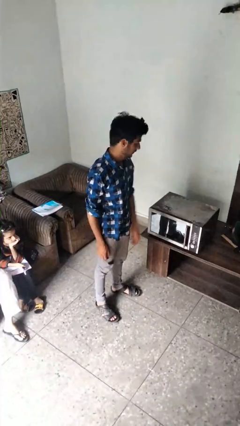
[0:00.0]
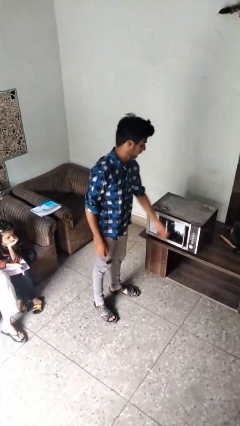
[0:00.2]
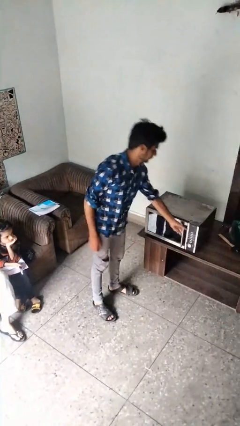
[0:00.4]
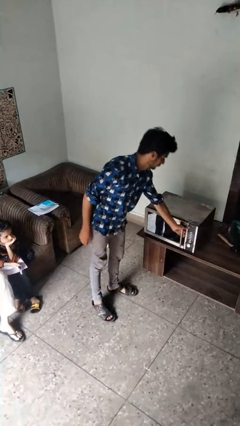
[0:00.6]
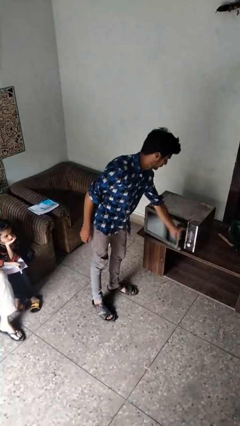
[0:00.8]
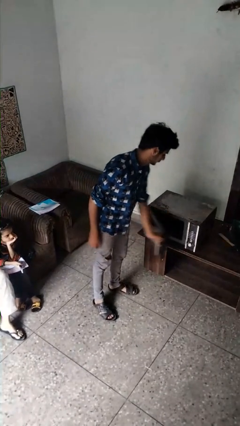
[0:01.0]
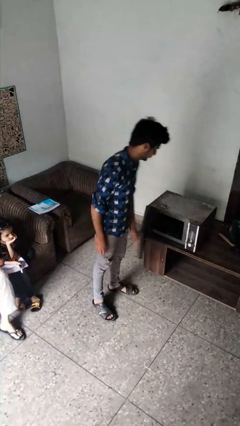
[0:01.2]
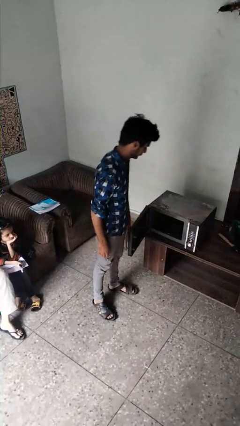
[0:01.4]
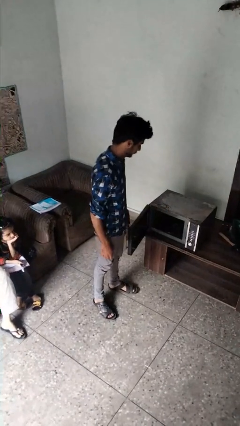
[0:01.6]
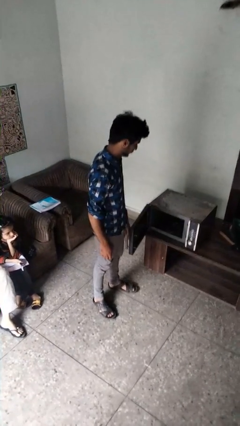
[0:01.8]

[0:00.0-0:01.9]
person opens microwave

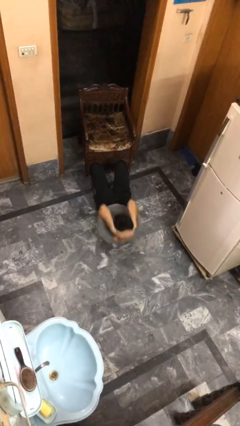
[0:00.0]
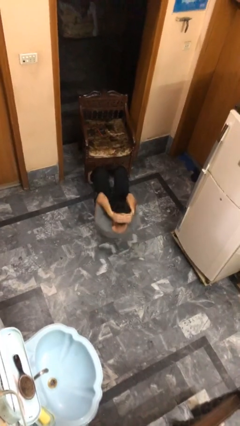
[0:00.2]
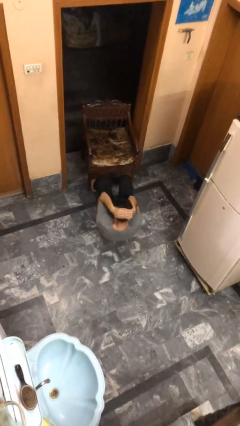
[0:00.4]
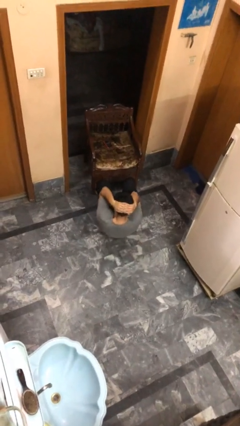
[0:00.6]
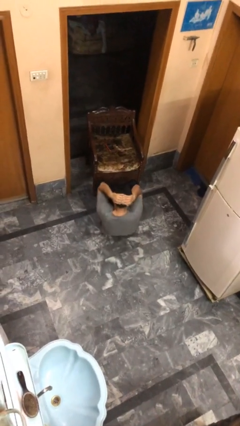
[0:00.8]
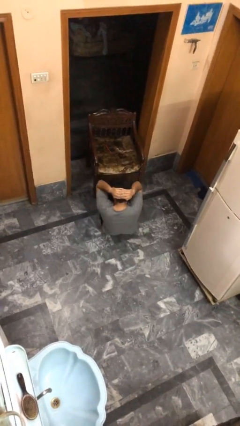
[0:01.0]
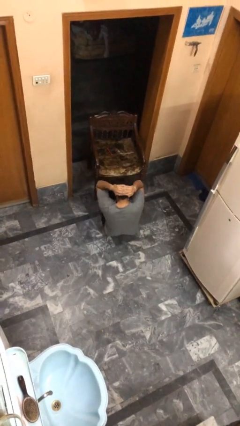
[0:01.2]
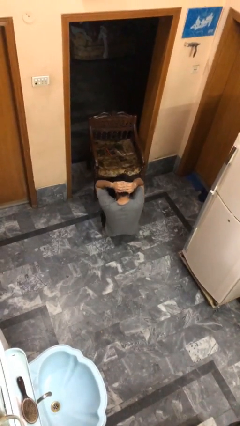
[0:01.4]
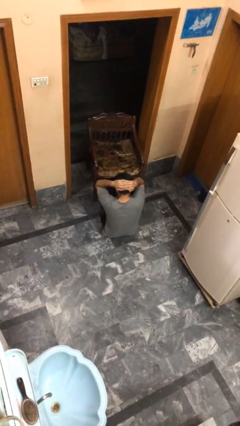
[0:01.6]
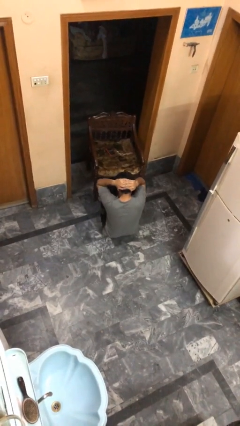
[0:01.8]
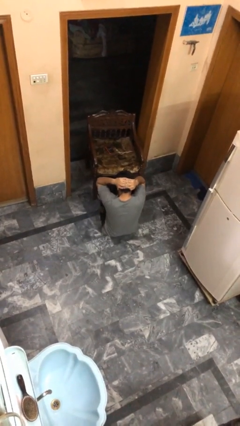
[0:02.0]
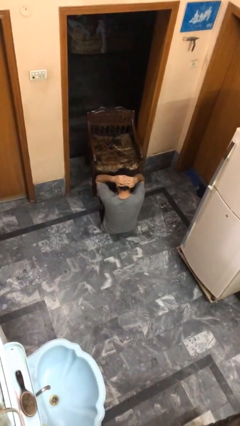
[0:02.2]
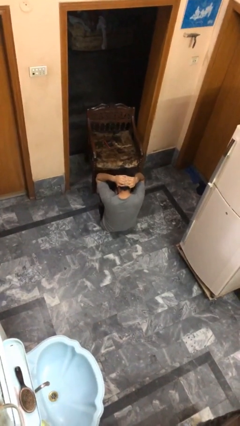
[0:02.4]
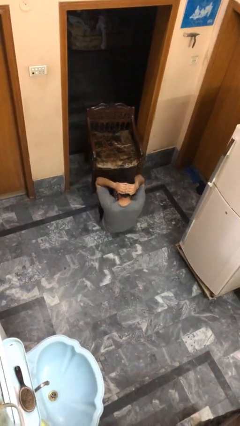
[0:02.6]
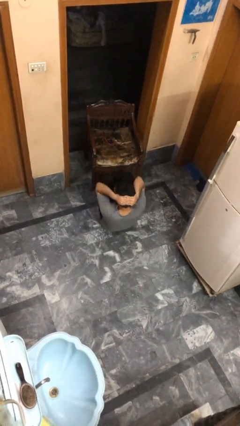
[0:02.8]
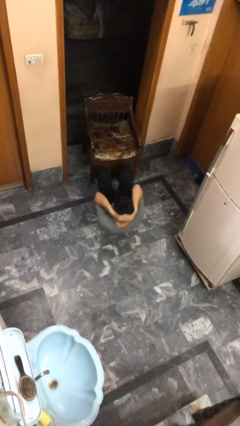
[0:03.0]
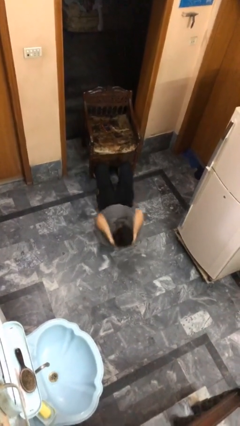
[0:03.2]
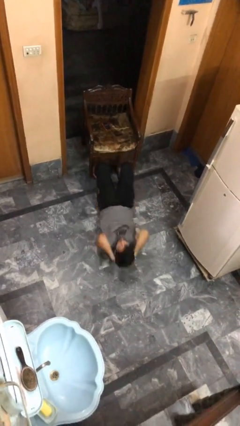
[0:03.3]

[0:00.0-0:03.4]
person exercises with situp

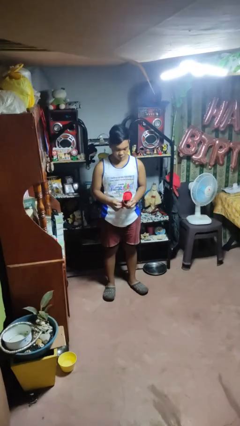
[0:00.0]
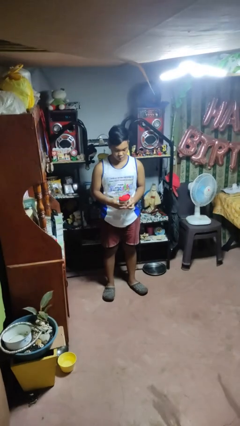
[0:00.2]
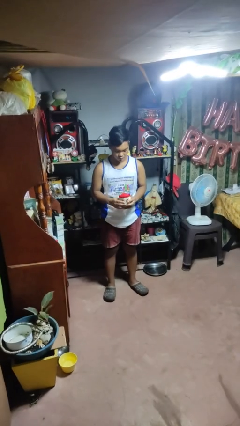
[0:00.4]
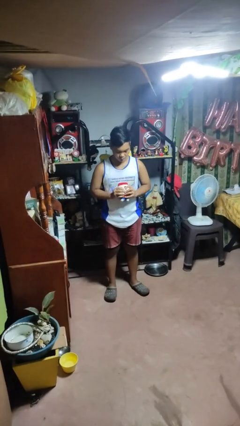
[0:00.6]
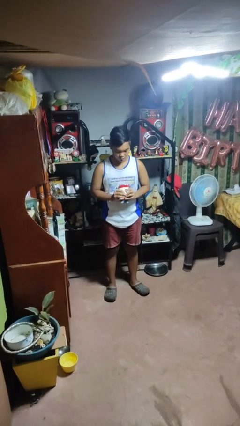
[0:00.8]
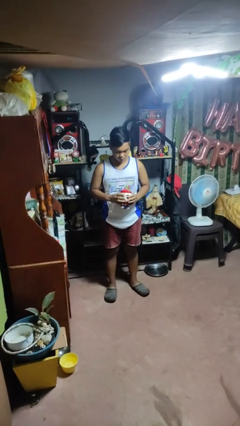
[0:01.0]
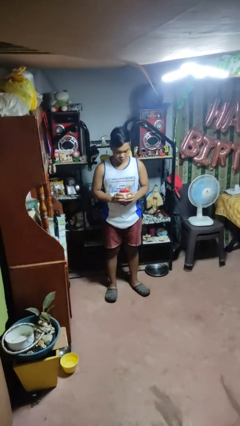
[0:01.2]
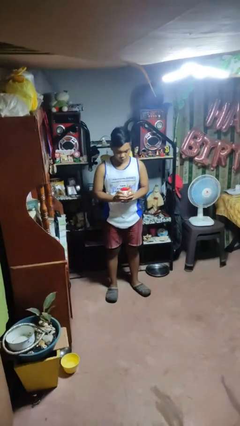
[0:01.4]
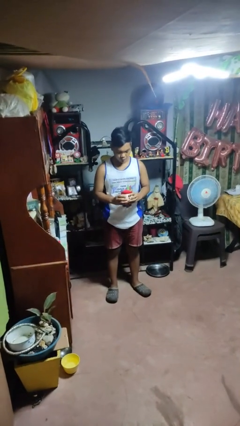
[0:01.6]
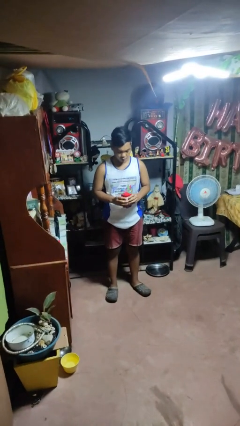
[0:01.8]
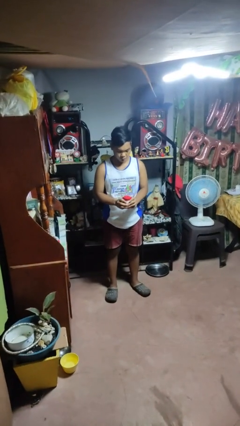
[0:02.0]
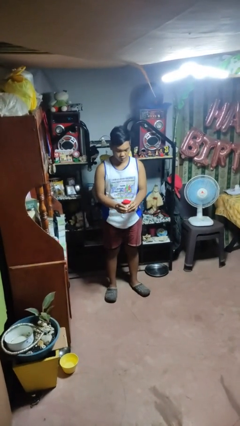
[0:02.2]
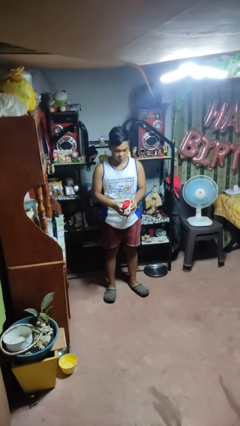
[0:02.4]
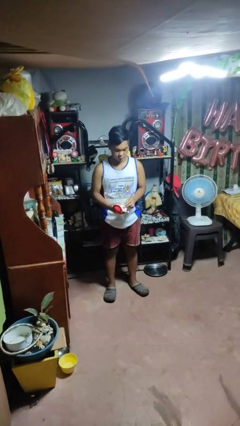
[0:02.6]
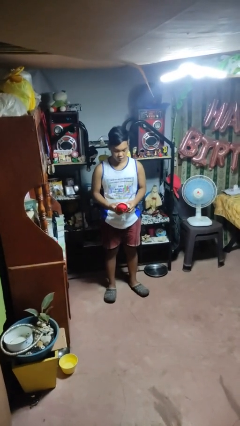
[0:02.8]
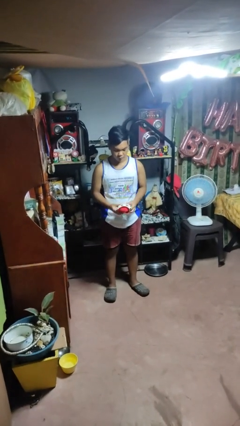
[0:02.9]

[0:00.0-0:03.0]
person squeezes object

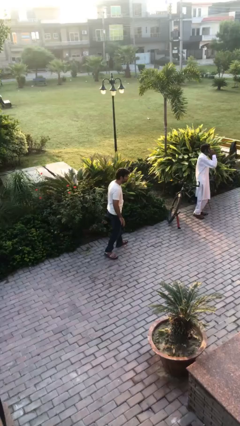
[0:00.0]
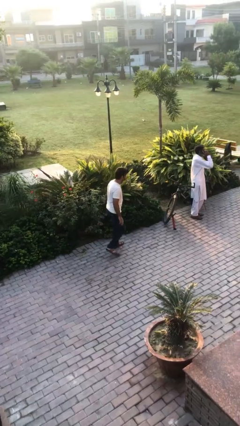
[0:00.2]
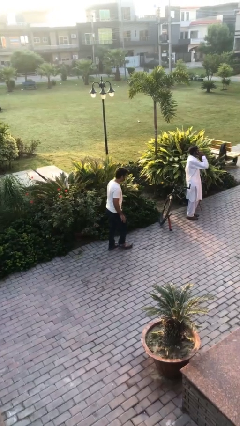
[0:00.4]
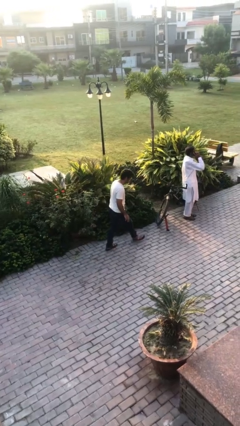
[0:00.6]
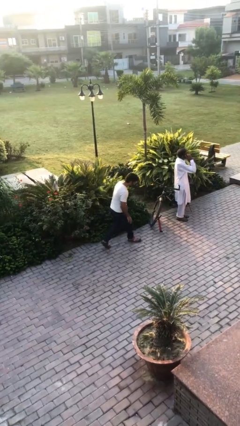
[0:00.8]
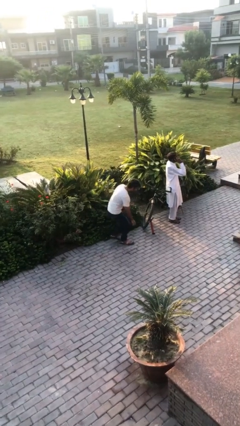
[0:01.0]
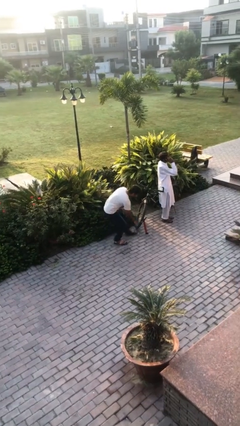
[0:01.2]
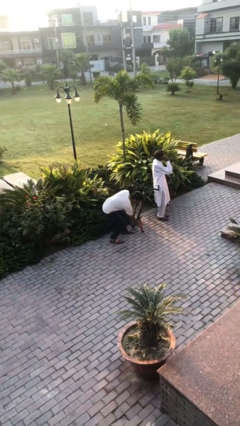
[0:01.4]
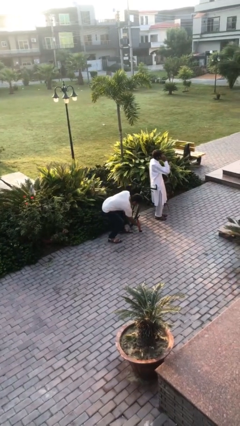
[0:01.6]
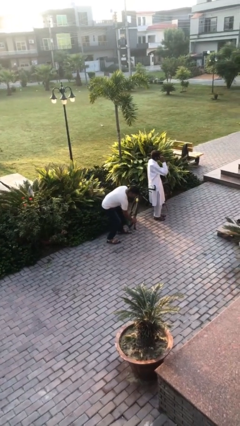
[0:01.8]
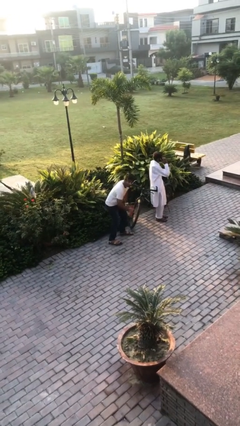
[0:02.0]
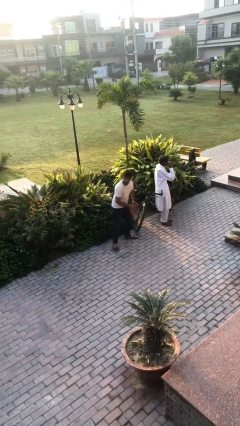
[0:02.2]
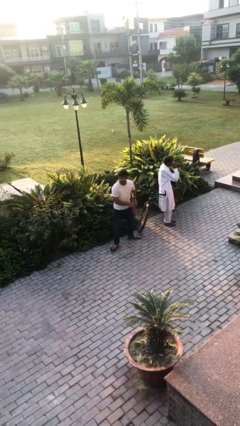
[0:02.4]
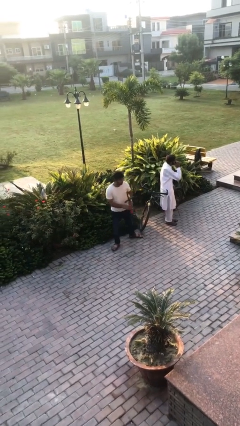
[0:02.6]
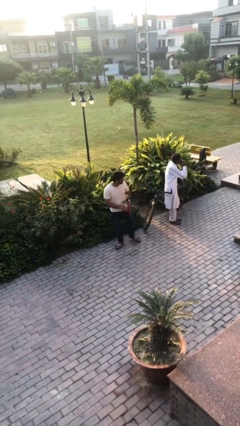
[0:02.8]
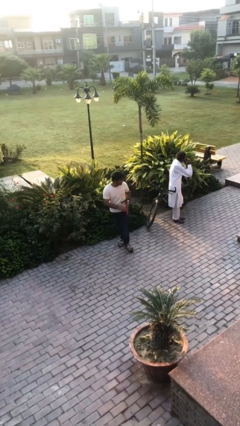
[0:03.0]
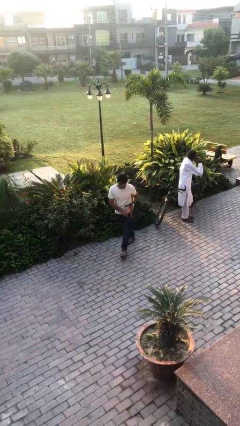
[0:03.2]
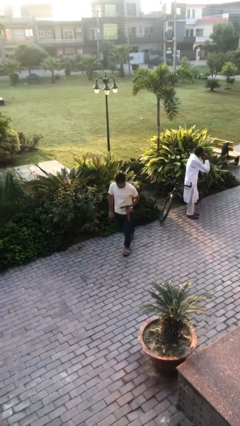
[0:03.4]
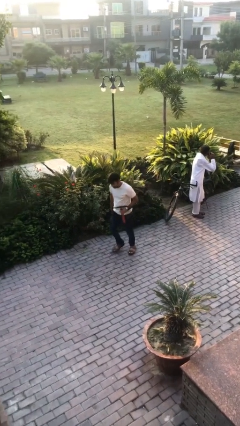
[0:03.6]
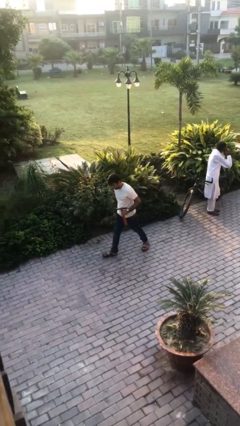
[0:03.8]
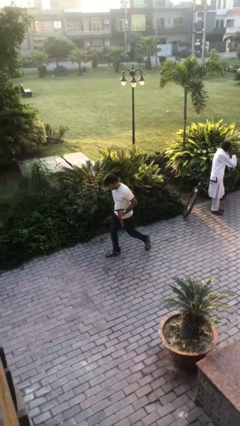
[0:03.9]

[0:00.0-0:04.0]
person steals object from person

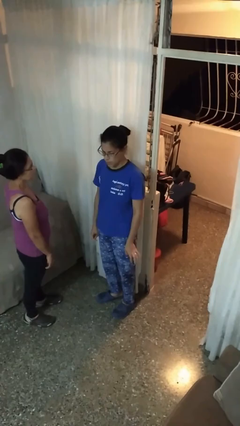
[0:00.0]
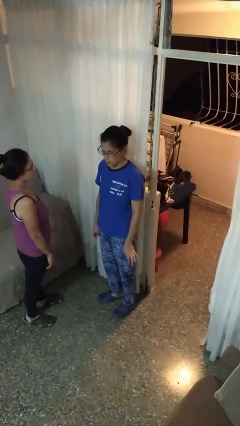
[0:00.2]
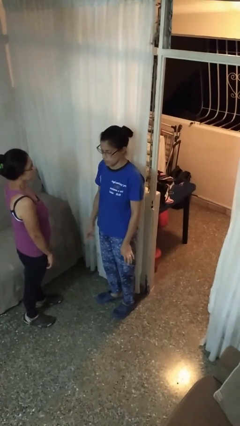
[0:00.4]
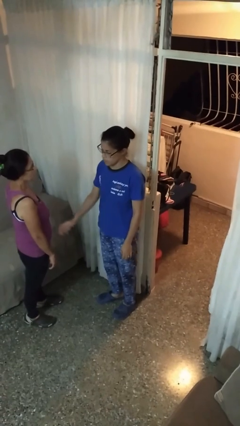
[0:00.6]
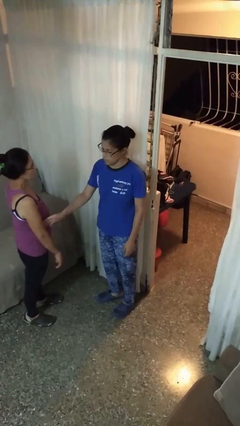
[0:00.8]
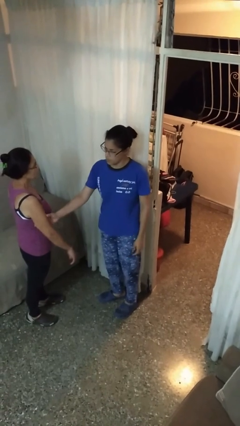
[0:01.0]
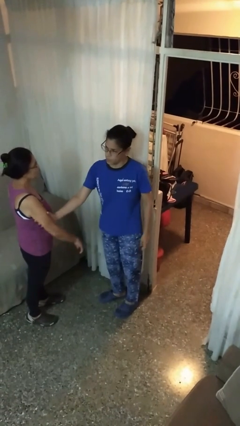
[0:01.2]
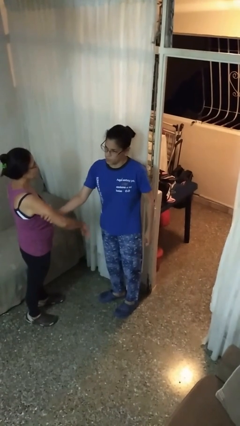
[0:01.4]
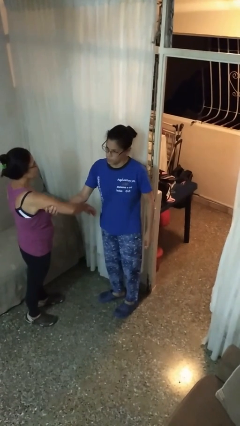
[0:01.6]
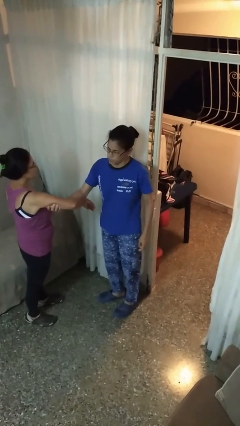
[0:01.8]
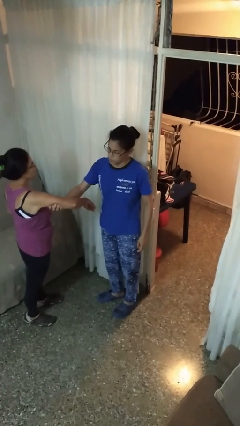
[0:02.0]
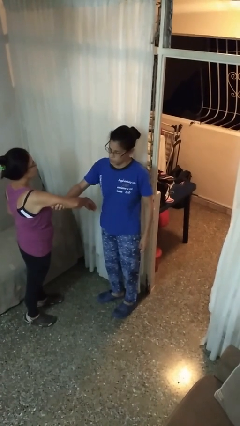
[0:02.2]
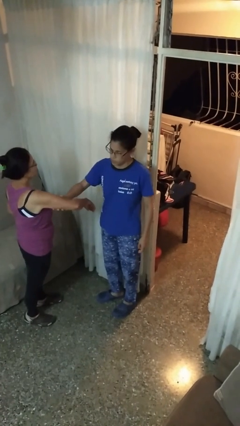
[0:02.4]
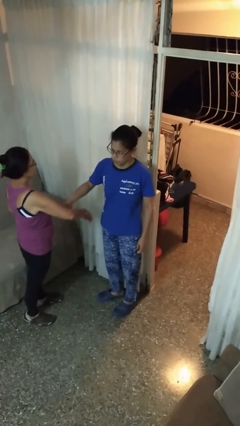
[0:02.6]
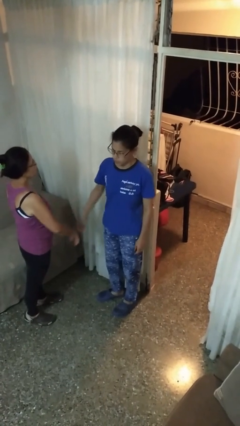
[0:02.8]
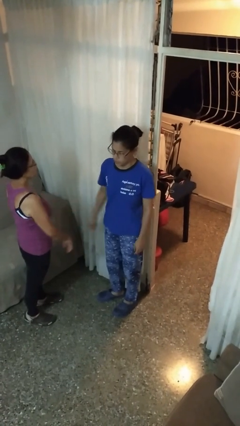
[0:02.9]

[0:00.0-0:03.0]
person grabs person by bicep

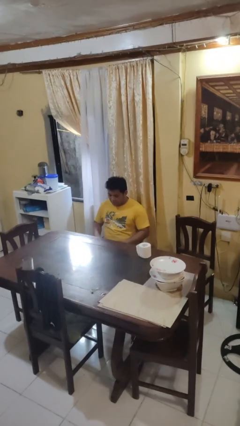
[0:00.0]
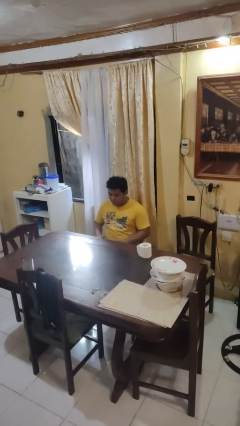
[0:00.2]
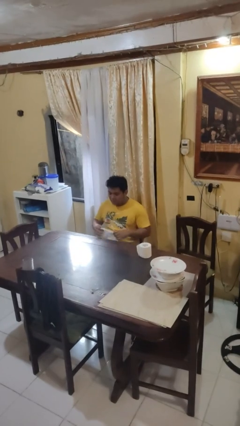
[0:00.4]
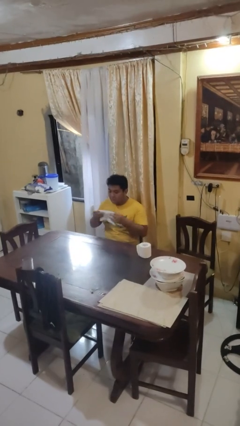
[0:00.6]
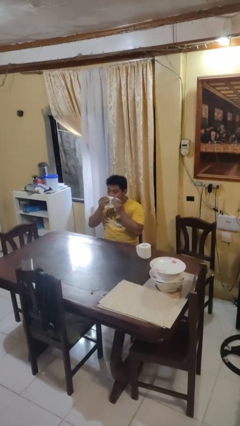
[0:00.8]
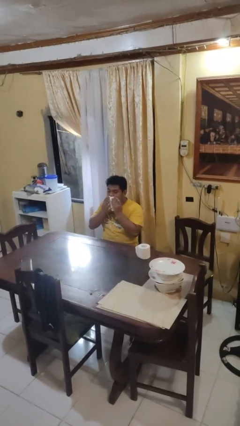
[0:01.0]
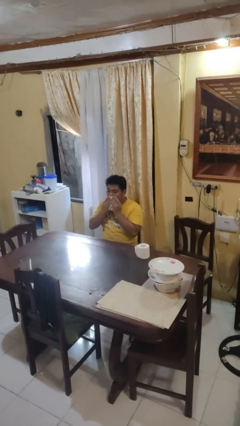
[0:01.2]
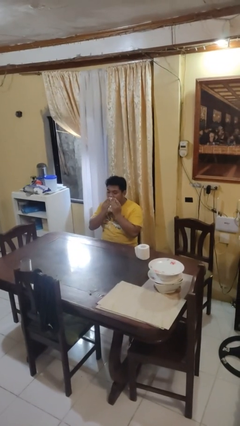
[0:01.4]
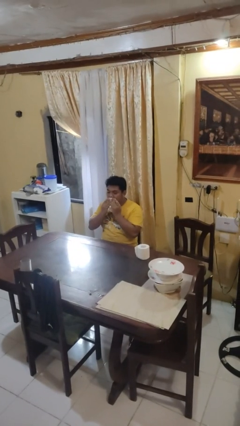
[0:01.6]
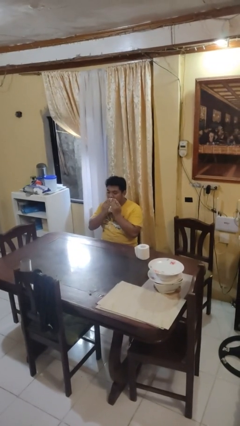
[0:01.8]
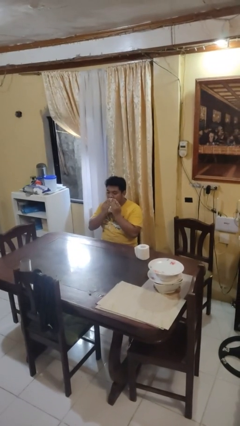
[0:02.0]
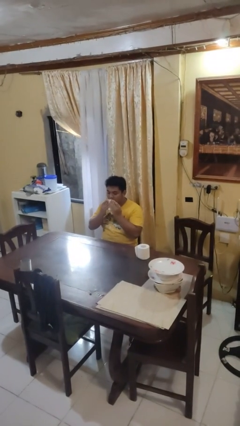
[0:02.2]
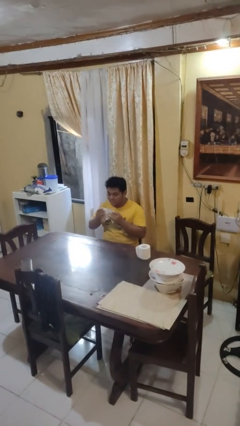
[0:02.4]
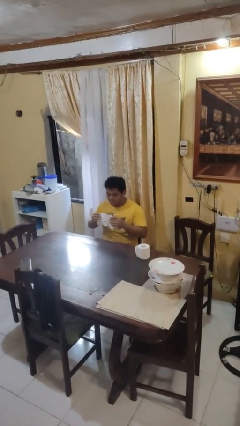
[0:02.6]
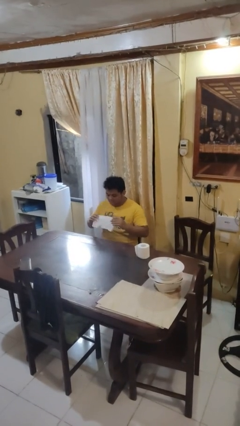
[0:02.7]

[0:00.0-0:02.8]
person wipes mouth with napkin
